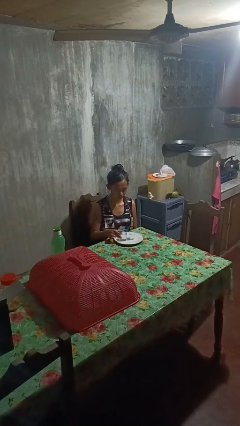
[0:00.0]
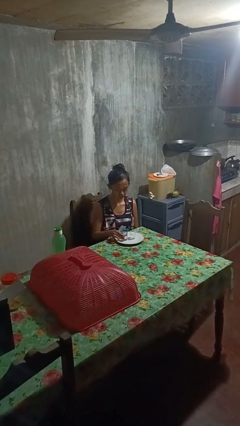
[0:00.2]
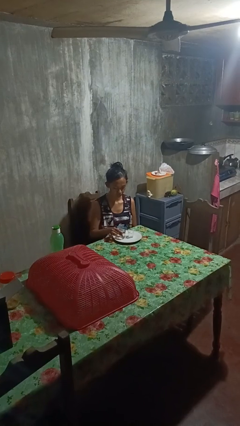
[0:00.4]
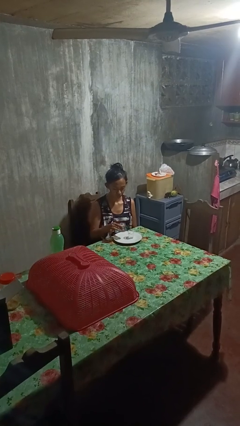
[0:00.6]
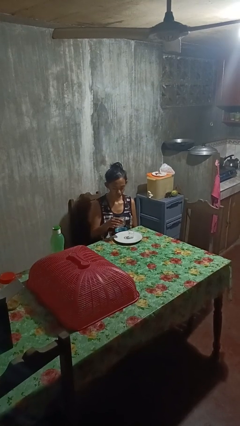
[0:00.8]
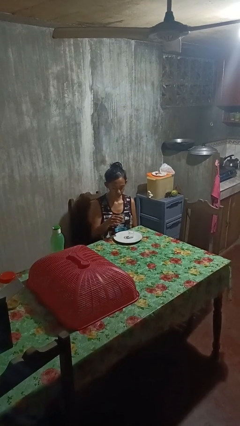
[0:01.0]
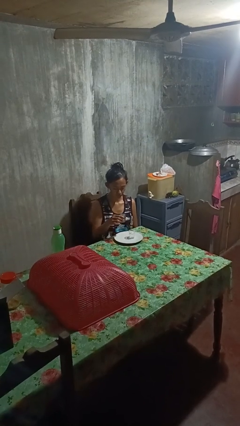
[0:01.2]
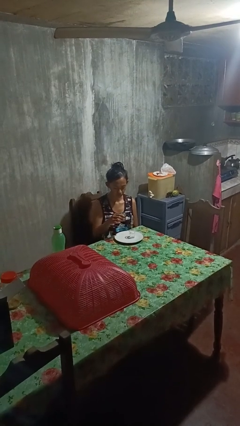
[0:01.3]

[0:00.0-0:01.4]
person picks up object from table

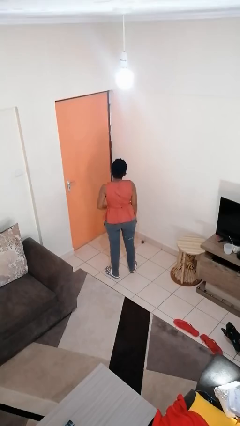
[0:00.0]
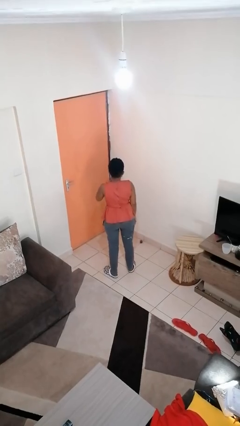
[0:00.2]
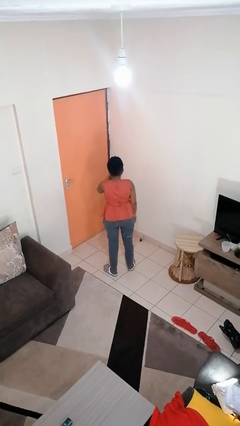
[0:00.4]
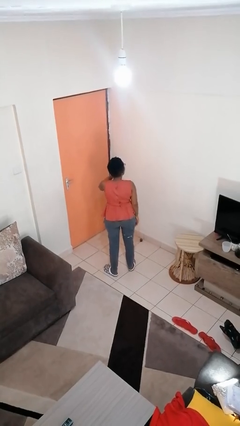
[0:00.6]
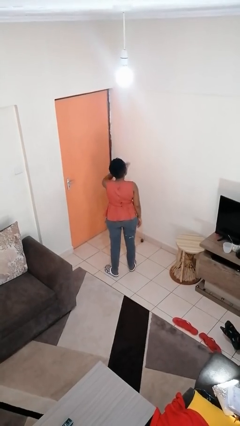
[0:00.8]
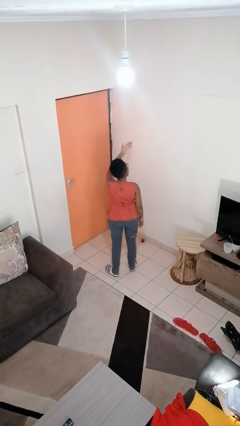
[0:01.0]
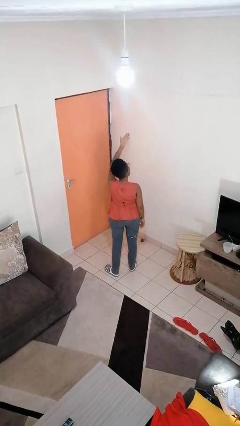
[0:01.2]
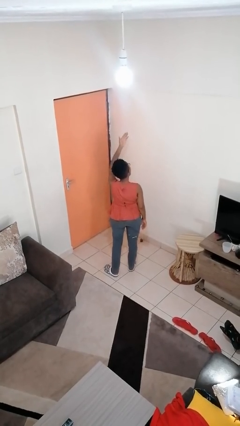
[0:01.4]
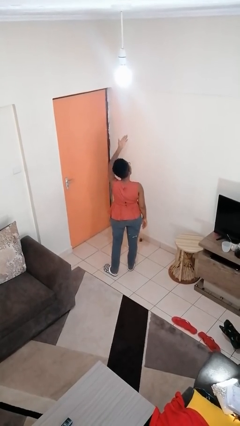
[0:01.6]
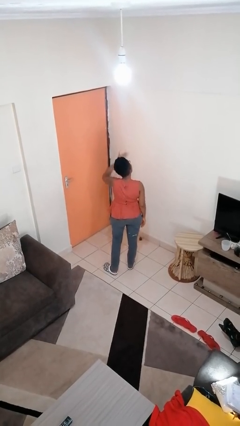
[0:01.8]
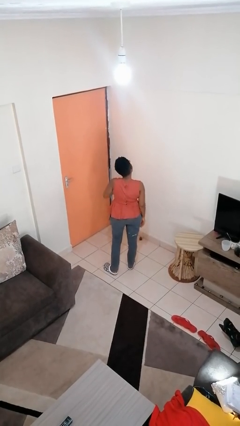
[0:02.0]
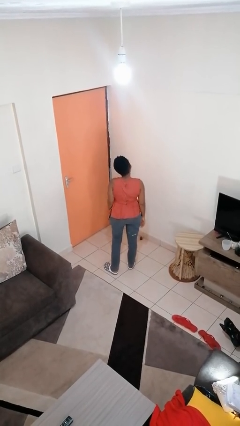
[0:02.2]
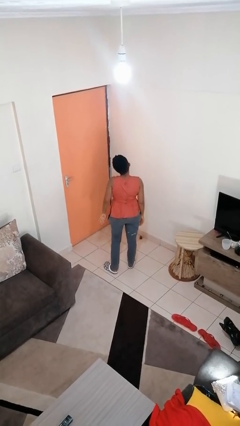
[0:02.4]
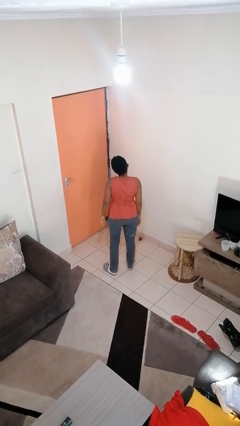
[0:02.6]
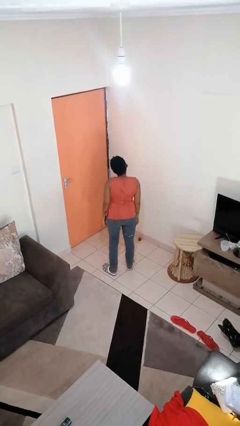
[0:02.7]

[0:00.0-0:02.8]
person gestures blow kiss

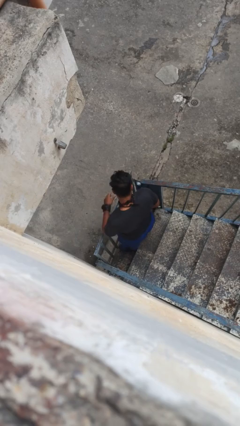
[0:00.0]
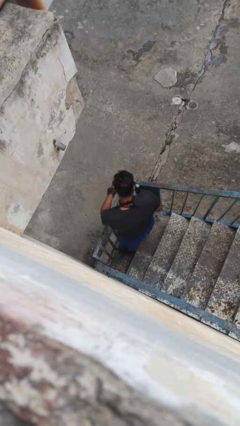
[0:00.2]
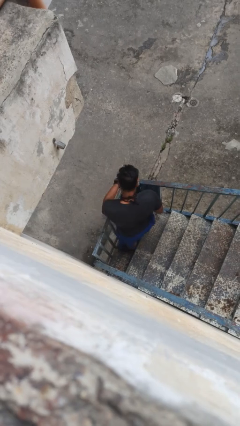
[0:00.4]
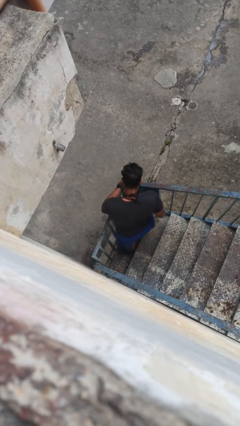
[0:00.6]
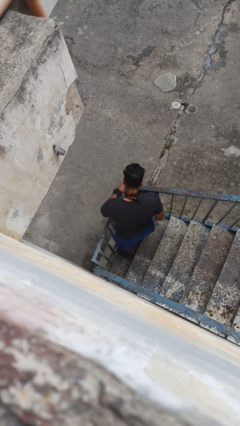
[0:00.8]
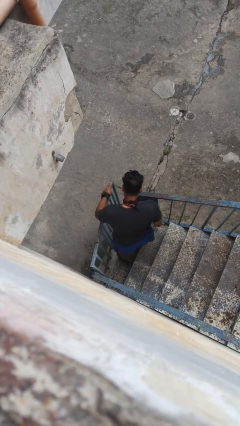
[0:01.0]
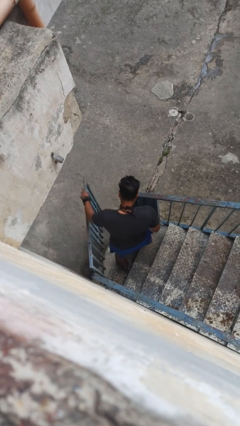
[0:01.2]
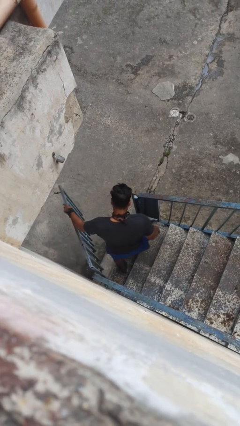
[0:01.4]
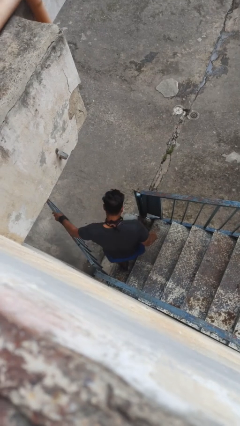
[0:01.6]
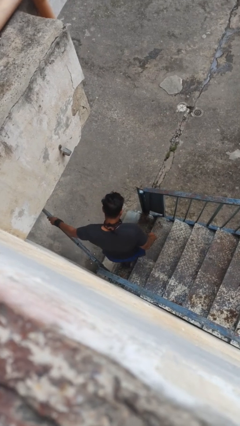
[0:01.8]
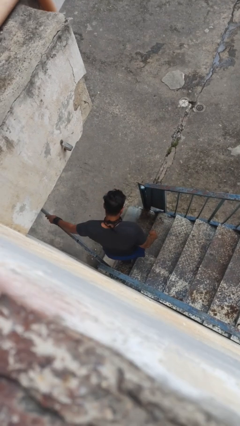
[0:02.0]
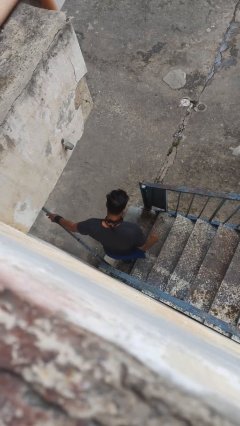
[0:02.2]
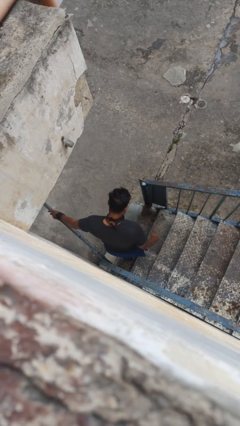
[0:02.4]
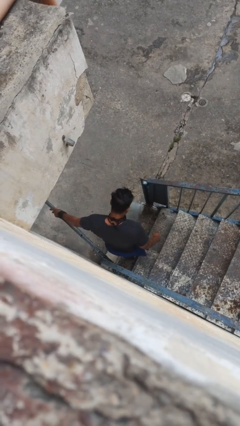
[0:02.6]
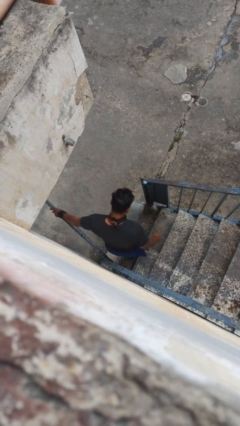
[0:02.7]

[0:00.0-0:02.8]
person opens facility door

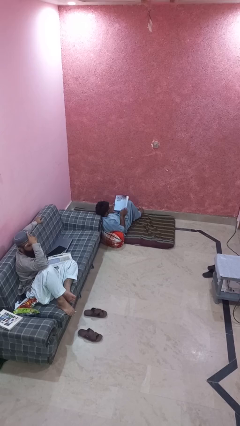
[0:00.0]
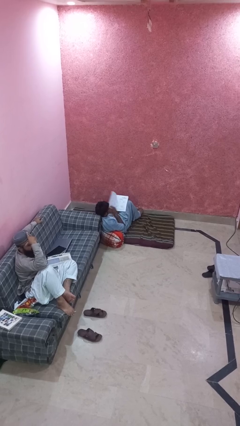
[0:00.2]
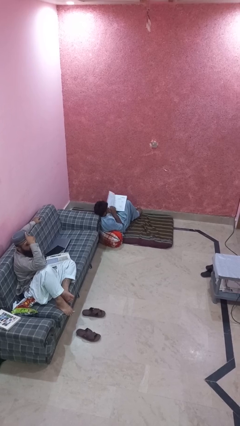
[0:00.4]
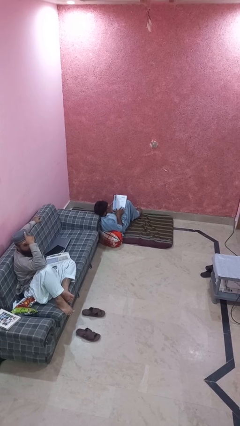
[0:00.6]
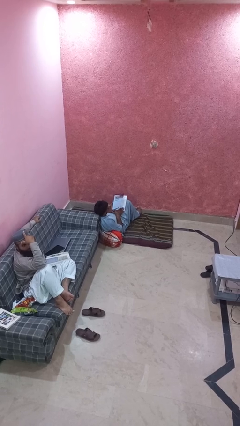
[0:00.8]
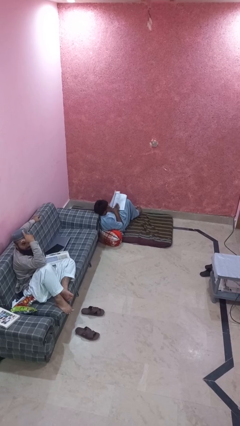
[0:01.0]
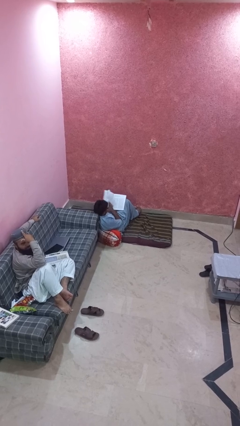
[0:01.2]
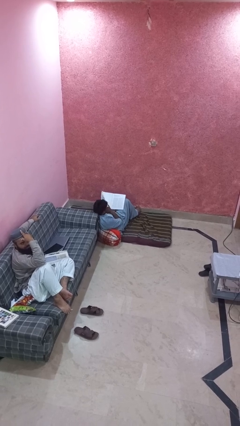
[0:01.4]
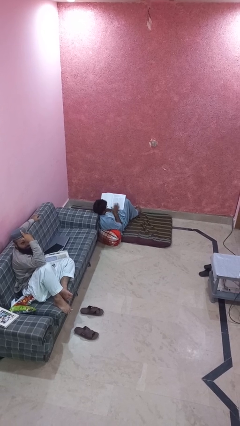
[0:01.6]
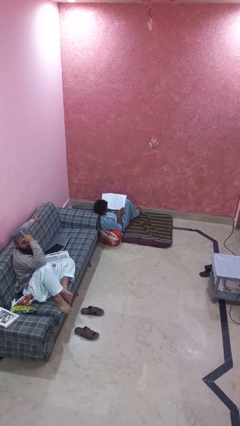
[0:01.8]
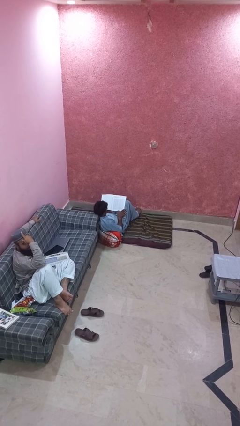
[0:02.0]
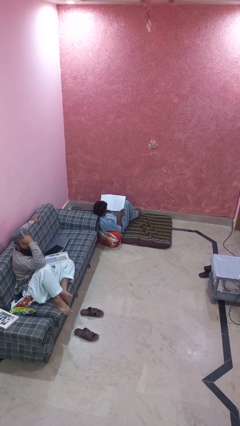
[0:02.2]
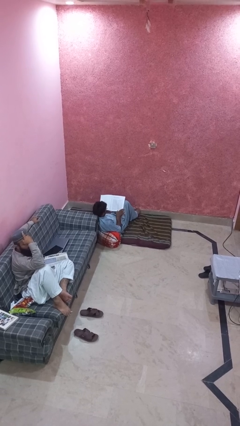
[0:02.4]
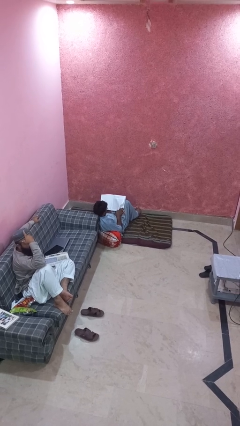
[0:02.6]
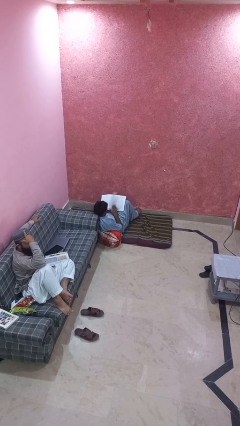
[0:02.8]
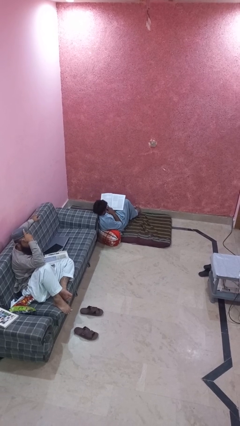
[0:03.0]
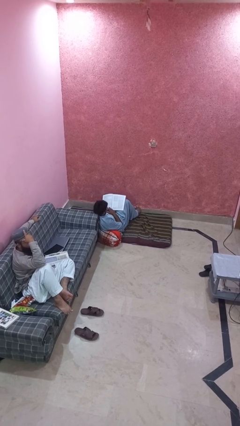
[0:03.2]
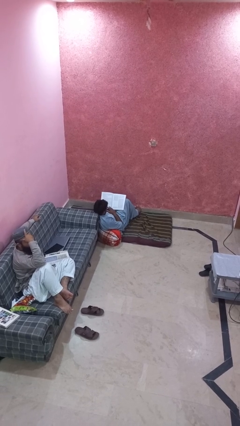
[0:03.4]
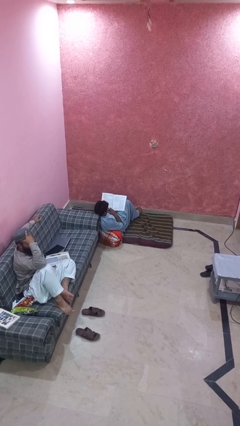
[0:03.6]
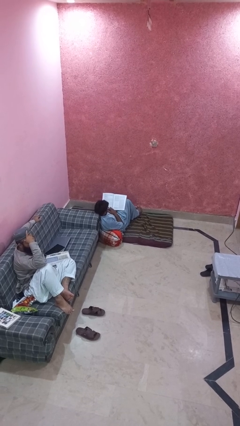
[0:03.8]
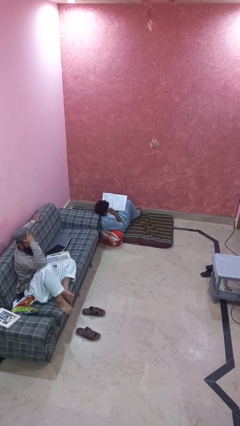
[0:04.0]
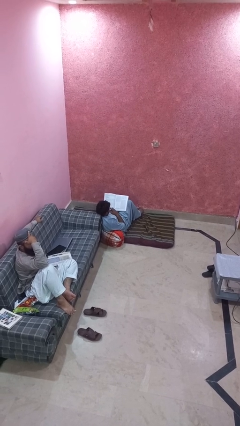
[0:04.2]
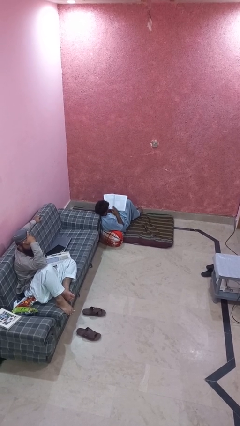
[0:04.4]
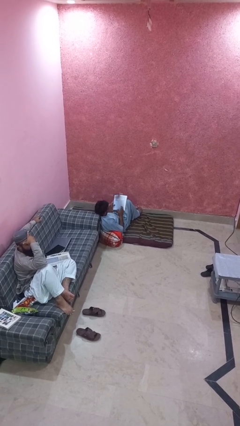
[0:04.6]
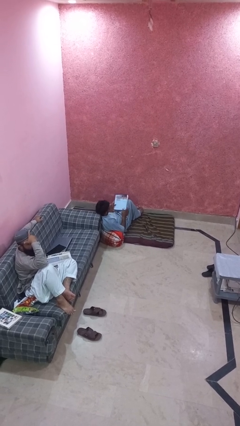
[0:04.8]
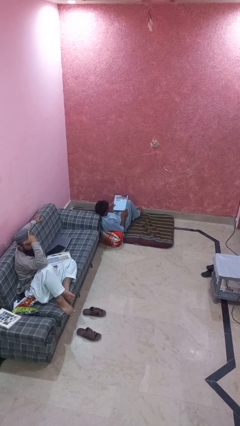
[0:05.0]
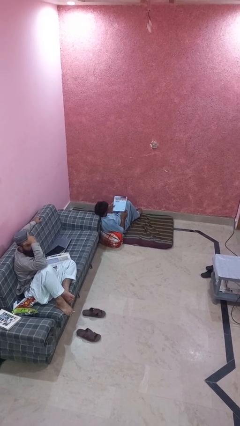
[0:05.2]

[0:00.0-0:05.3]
person reads magazine

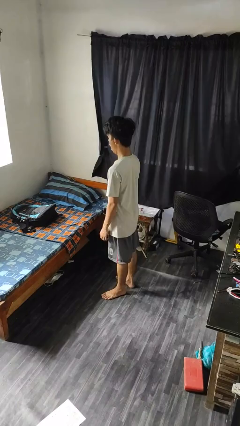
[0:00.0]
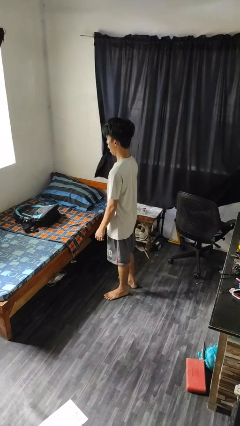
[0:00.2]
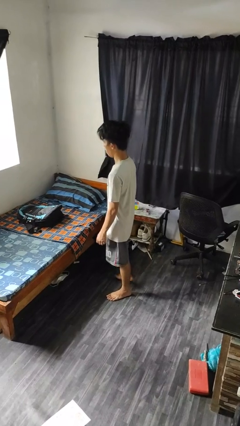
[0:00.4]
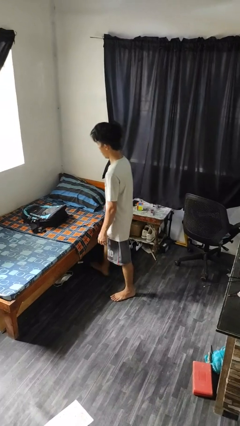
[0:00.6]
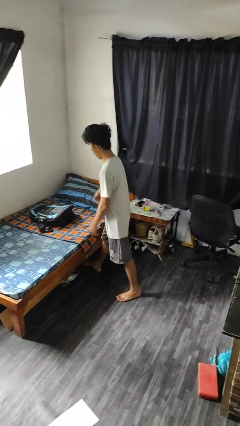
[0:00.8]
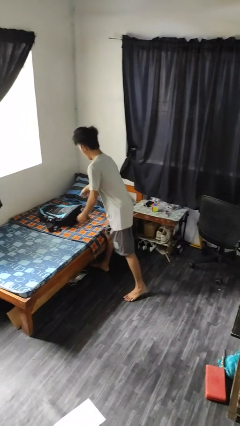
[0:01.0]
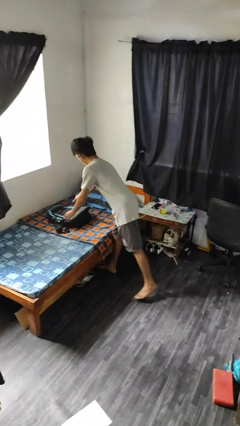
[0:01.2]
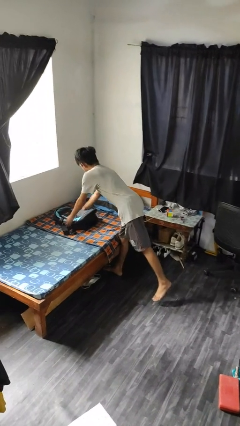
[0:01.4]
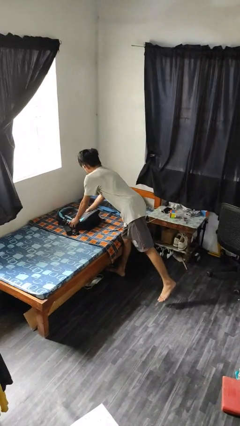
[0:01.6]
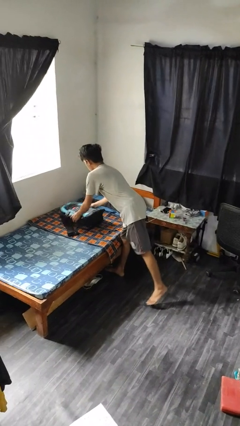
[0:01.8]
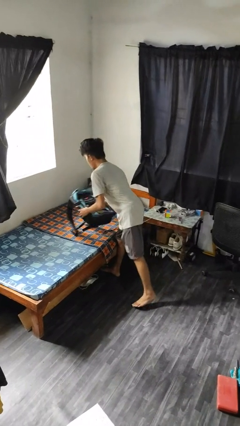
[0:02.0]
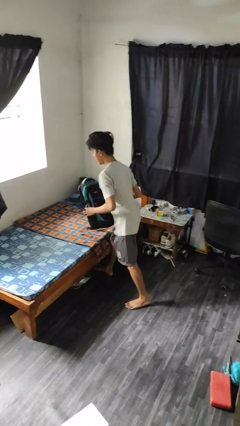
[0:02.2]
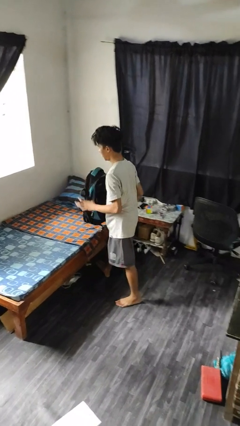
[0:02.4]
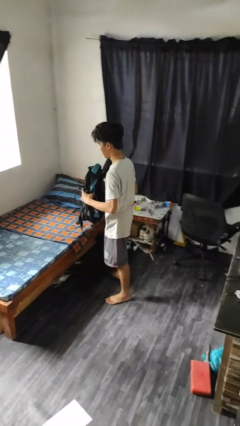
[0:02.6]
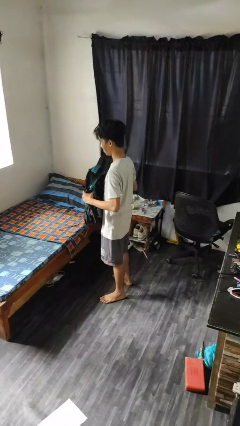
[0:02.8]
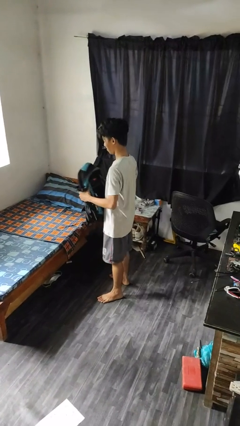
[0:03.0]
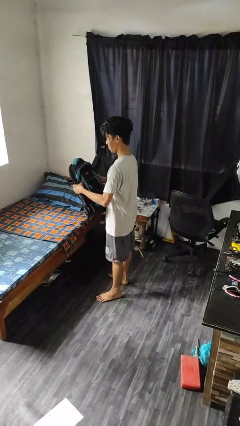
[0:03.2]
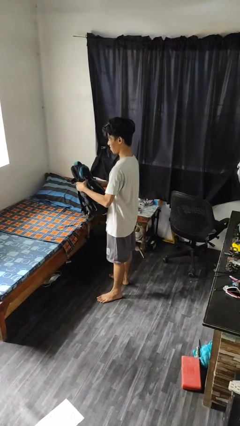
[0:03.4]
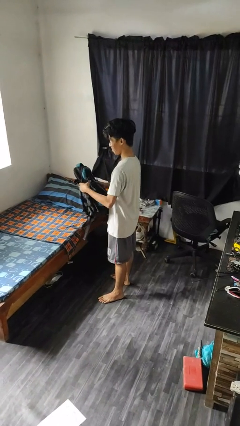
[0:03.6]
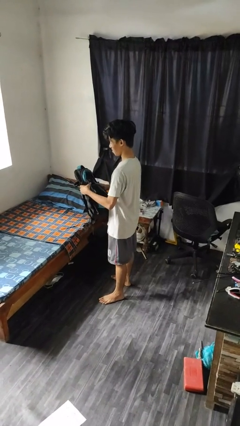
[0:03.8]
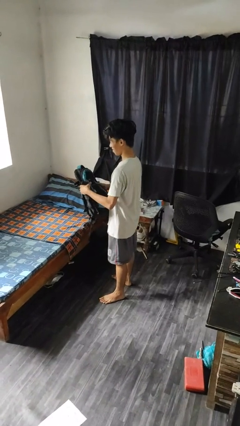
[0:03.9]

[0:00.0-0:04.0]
person picks up object from bed

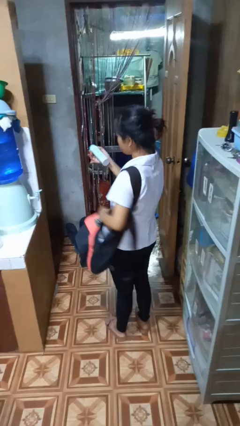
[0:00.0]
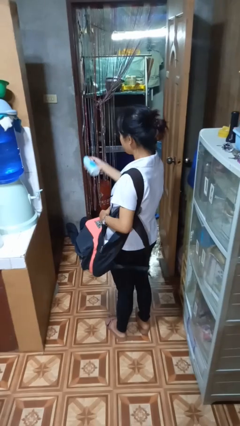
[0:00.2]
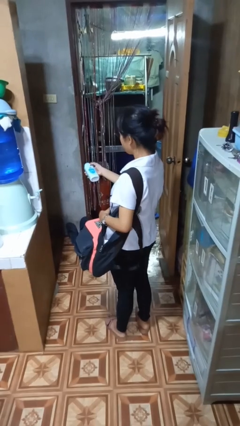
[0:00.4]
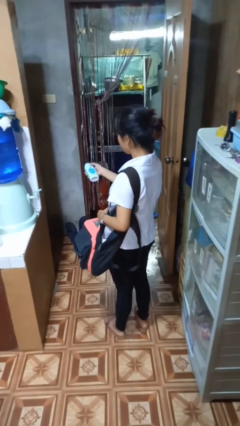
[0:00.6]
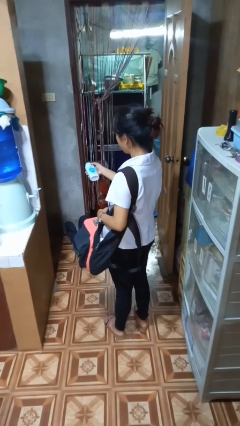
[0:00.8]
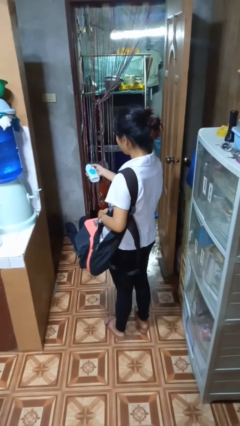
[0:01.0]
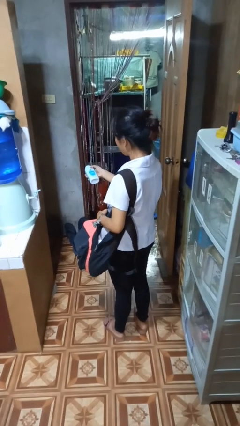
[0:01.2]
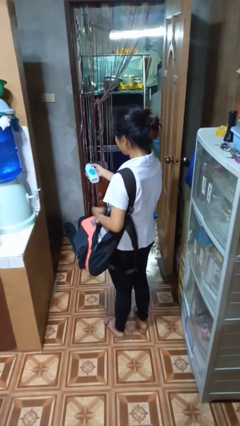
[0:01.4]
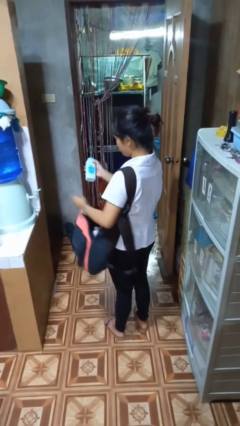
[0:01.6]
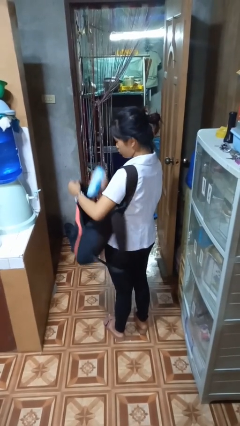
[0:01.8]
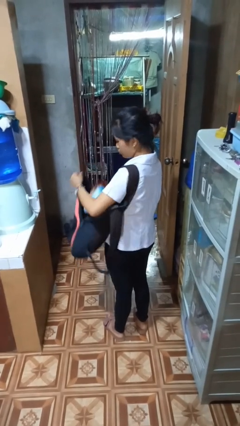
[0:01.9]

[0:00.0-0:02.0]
person takes object from backpack
